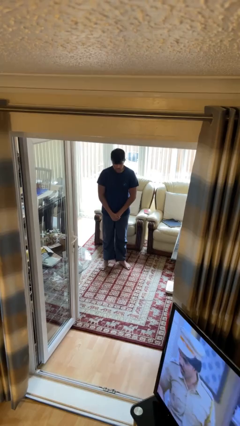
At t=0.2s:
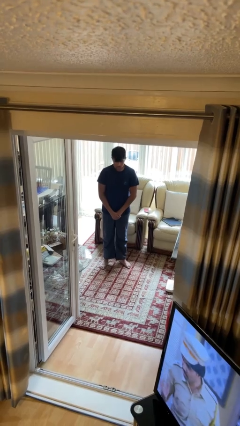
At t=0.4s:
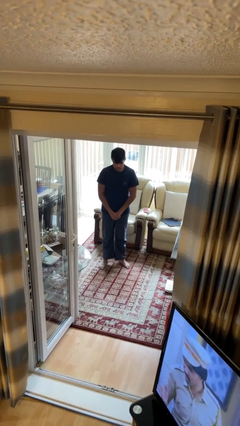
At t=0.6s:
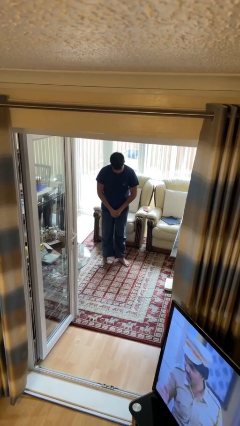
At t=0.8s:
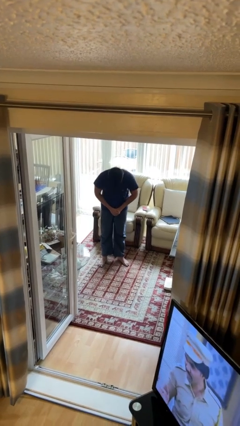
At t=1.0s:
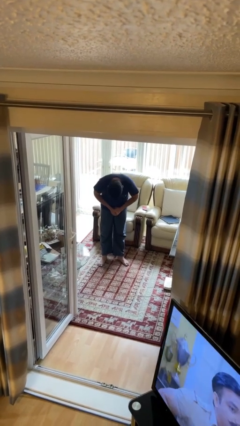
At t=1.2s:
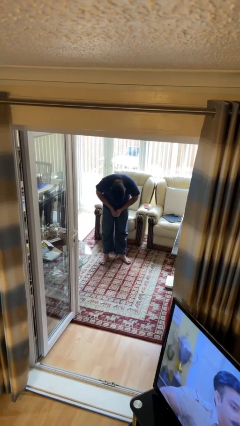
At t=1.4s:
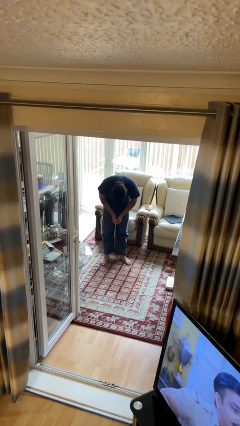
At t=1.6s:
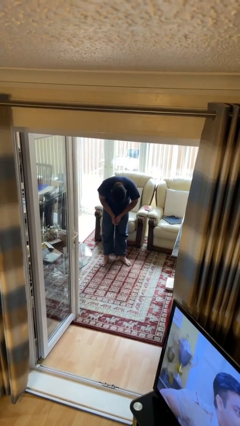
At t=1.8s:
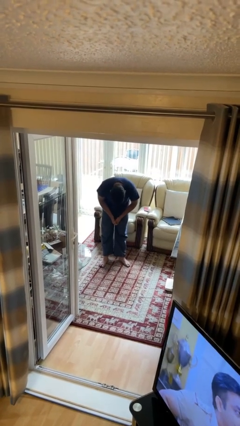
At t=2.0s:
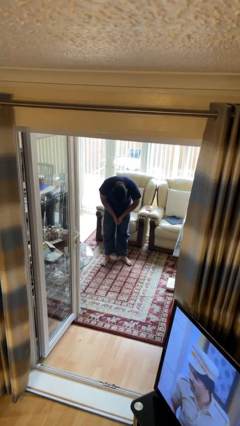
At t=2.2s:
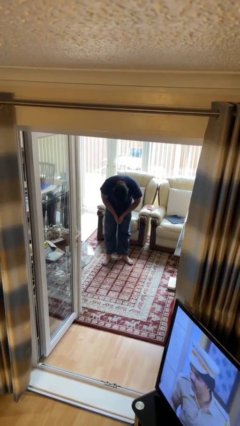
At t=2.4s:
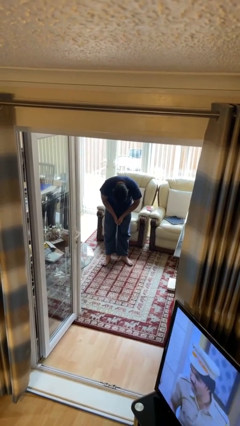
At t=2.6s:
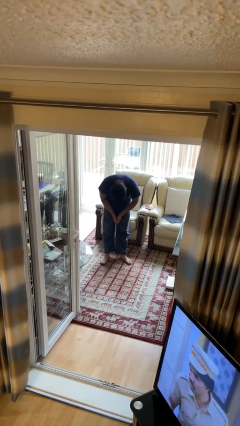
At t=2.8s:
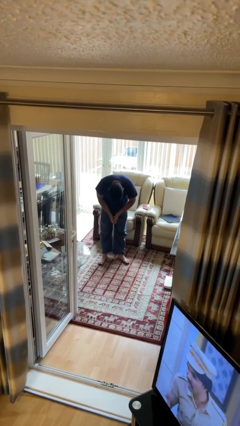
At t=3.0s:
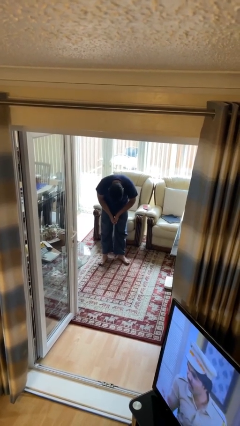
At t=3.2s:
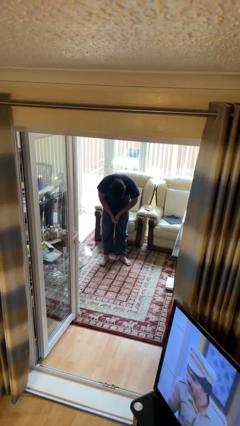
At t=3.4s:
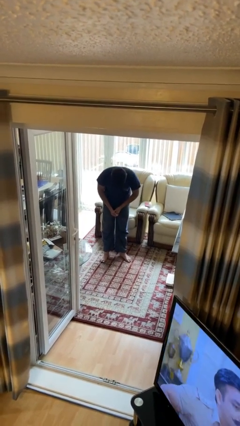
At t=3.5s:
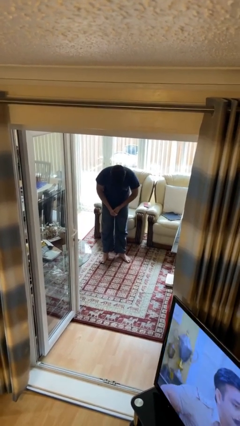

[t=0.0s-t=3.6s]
person bows

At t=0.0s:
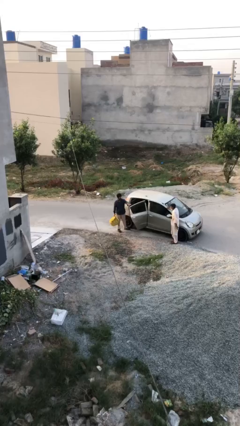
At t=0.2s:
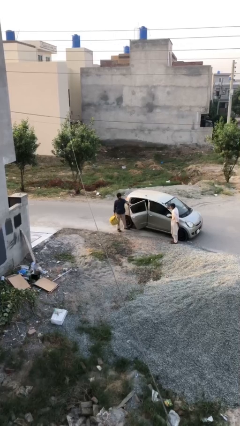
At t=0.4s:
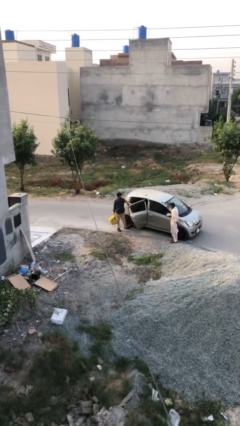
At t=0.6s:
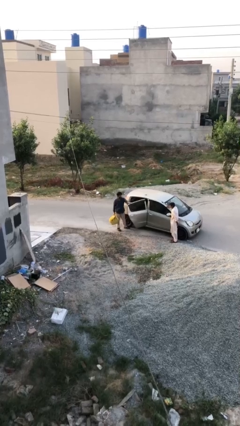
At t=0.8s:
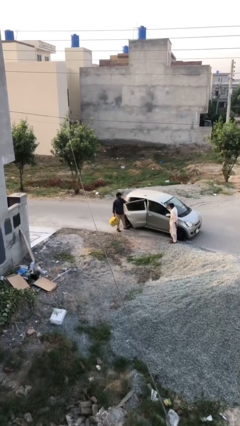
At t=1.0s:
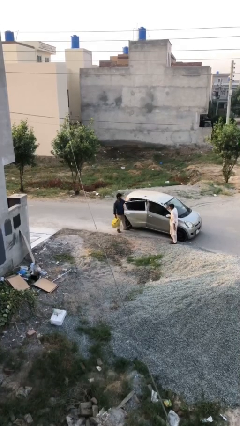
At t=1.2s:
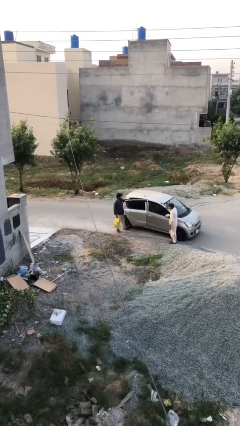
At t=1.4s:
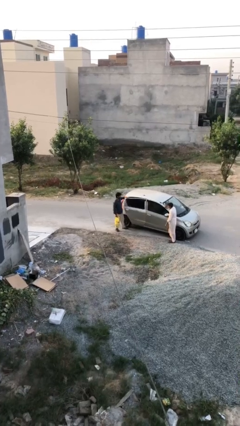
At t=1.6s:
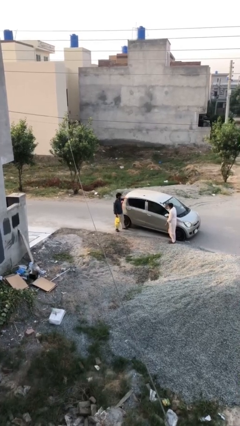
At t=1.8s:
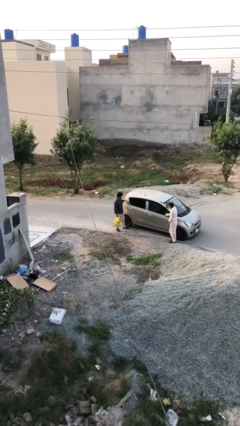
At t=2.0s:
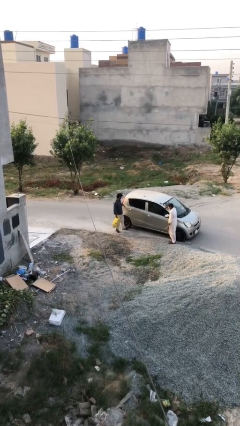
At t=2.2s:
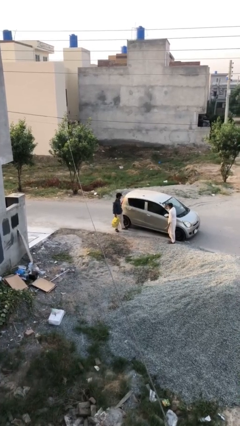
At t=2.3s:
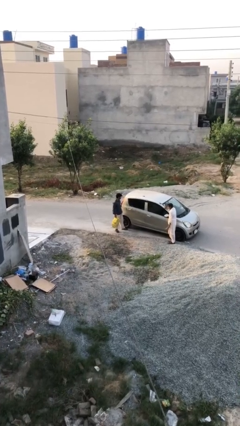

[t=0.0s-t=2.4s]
person closes car door

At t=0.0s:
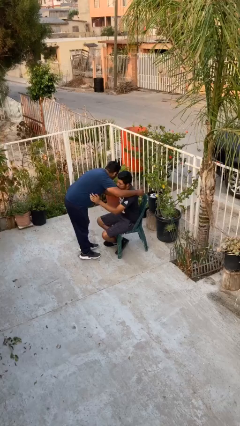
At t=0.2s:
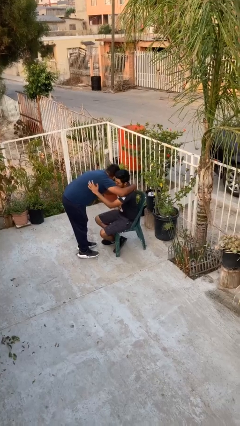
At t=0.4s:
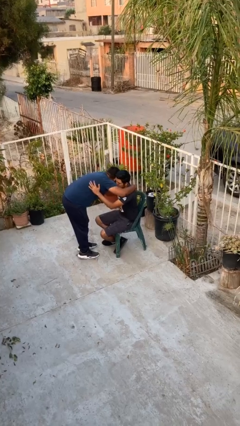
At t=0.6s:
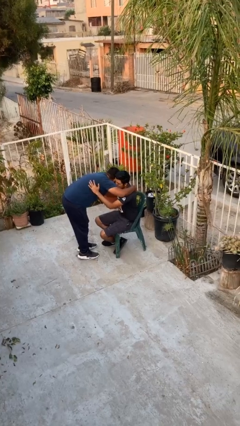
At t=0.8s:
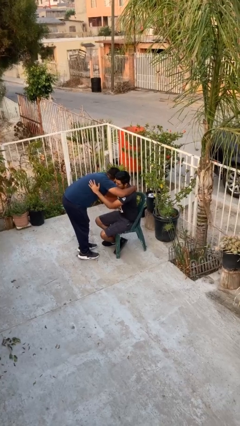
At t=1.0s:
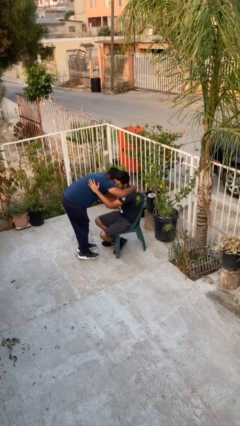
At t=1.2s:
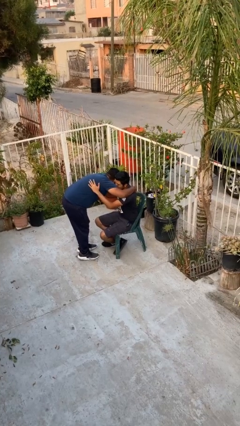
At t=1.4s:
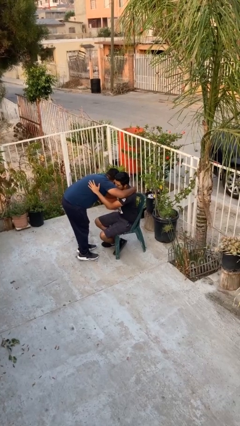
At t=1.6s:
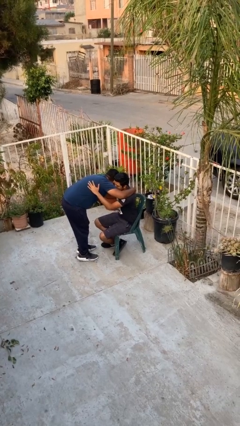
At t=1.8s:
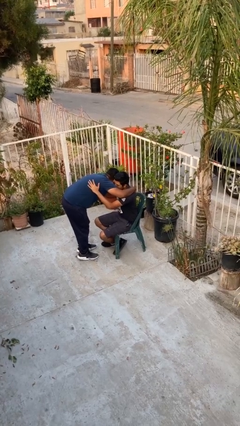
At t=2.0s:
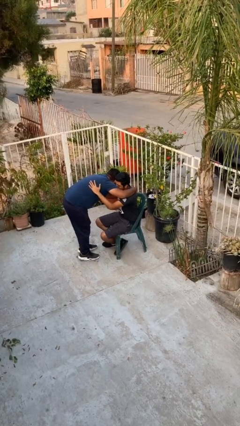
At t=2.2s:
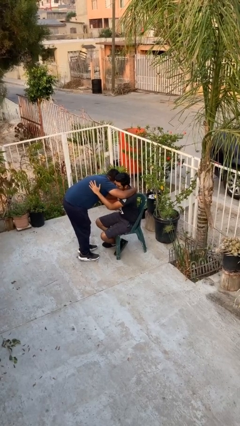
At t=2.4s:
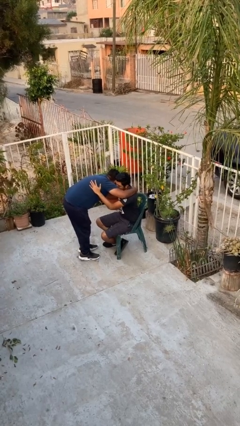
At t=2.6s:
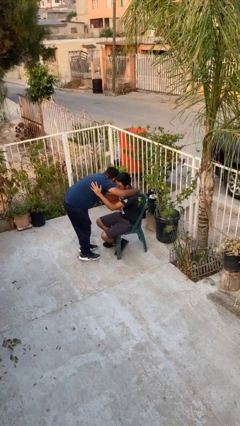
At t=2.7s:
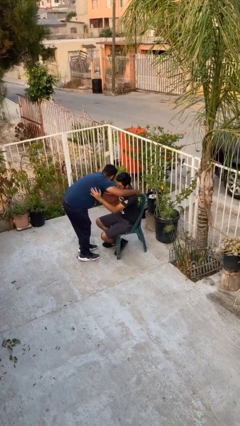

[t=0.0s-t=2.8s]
person embraces person

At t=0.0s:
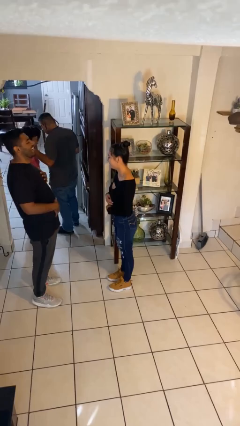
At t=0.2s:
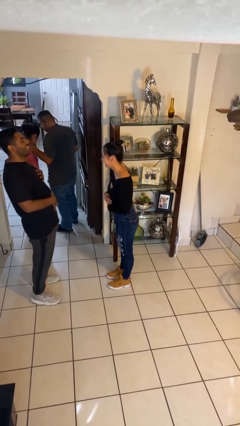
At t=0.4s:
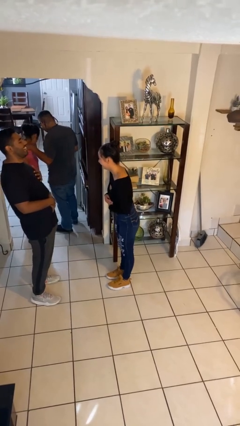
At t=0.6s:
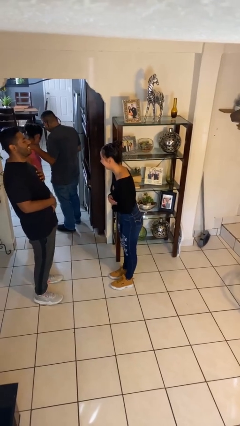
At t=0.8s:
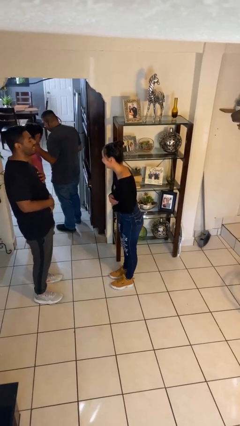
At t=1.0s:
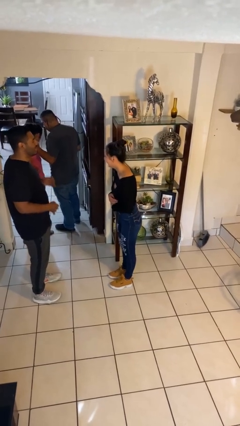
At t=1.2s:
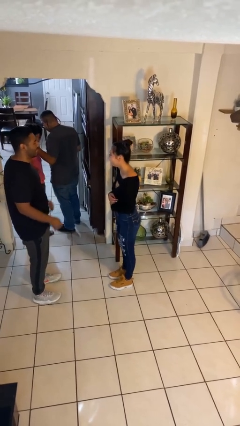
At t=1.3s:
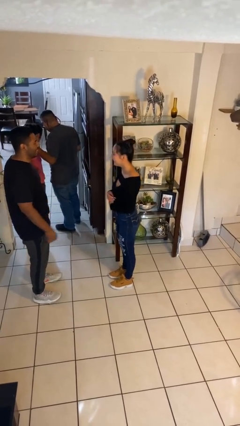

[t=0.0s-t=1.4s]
person laughs with person

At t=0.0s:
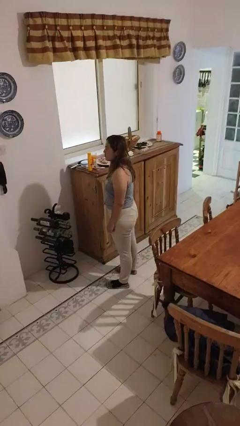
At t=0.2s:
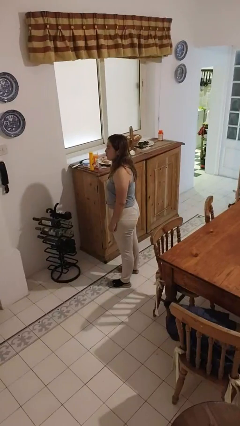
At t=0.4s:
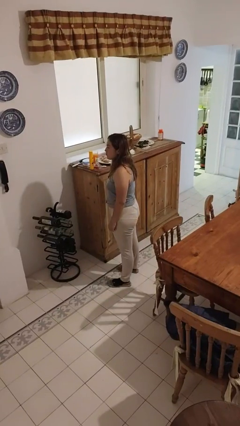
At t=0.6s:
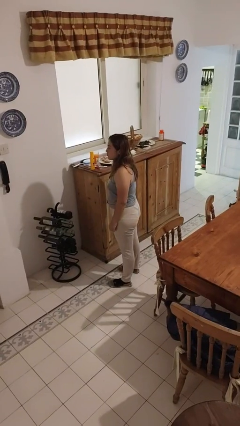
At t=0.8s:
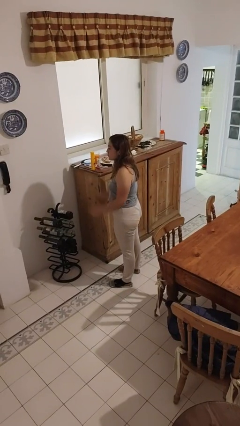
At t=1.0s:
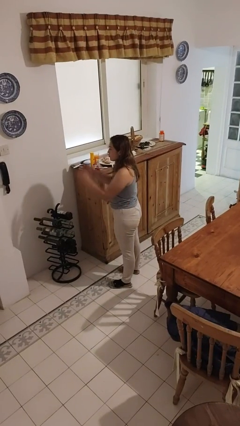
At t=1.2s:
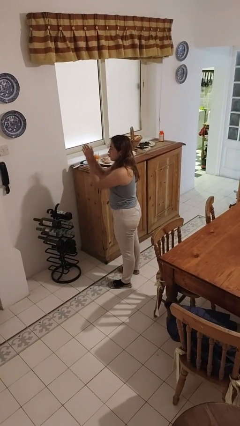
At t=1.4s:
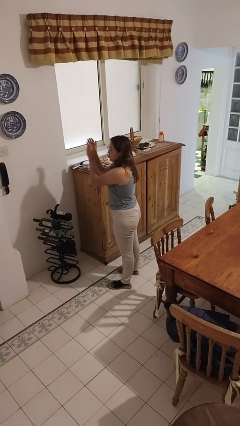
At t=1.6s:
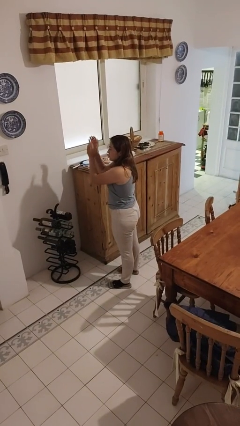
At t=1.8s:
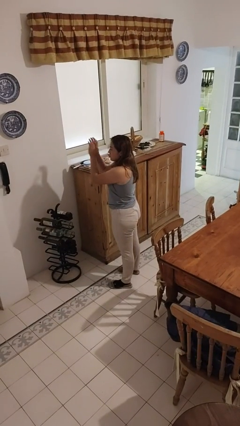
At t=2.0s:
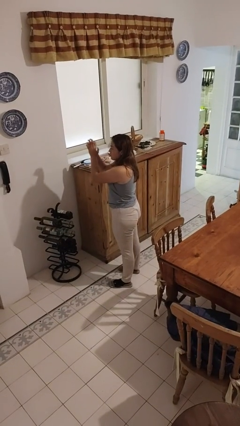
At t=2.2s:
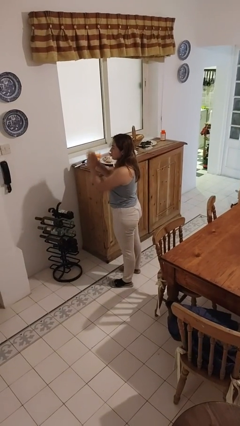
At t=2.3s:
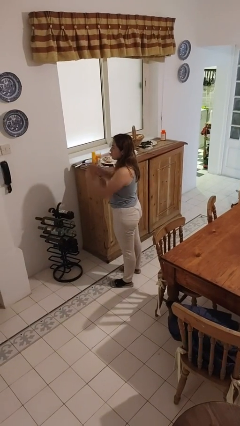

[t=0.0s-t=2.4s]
person claps hands

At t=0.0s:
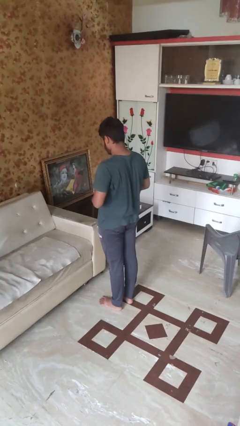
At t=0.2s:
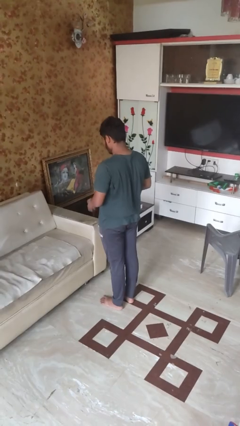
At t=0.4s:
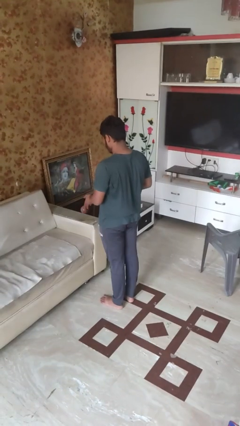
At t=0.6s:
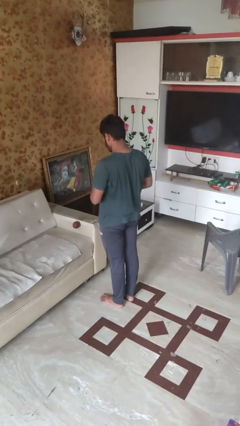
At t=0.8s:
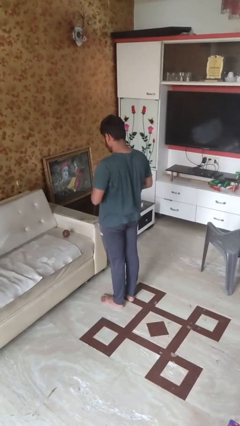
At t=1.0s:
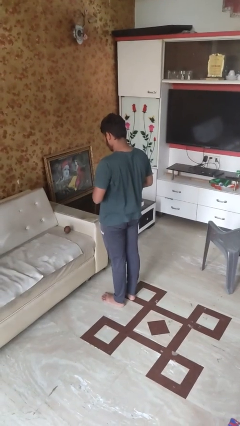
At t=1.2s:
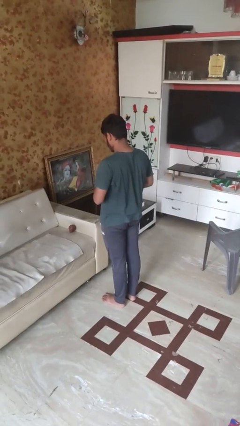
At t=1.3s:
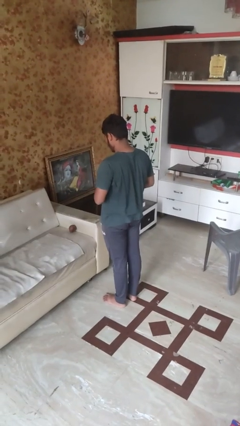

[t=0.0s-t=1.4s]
person throws object on bed

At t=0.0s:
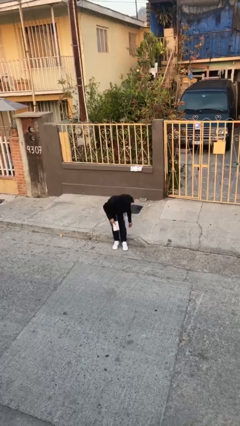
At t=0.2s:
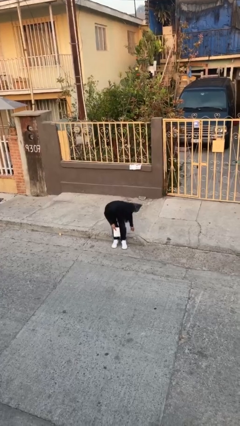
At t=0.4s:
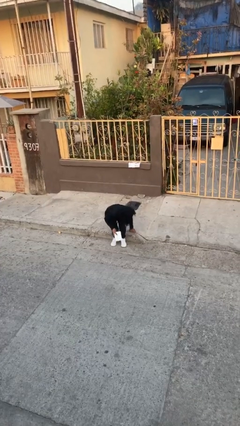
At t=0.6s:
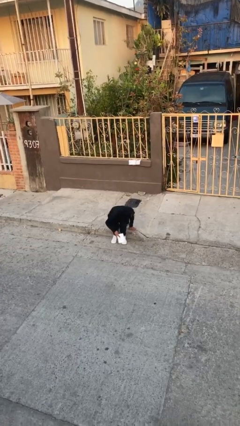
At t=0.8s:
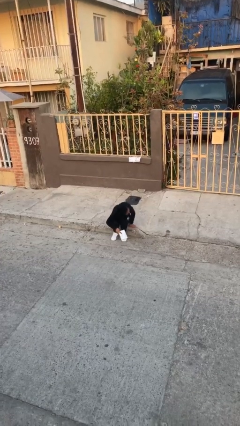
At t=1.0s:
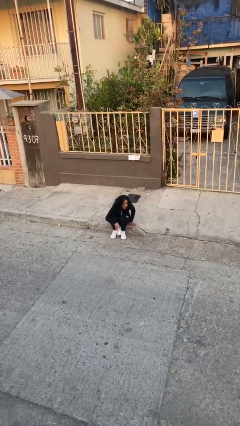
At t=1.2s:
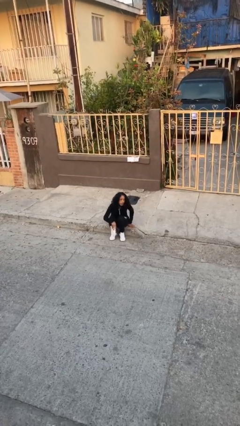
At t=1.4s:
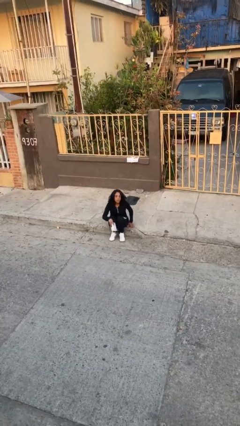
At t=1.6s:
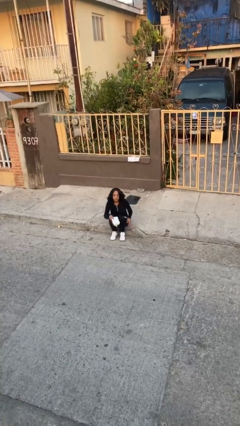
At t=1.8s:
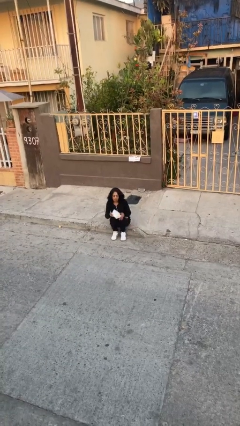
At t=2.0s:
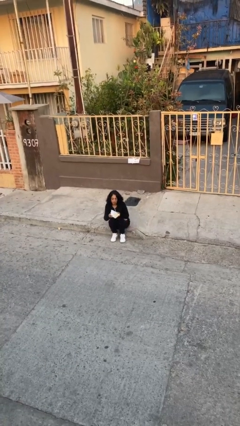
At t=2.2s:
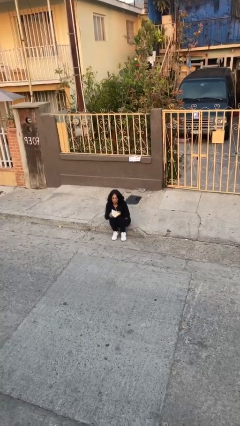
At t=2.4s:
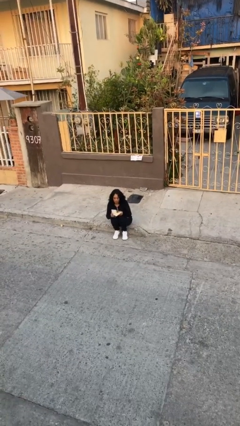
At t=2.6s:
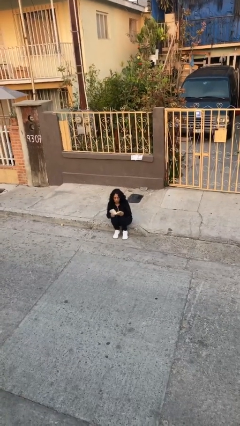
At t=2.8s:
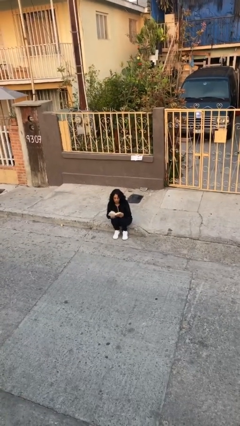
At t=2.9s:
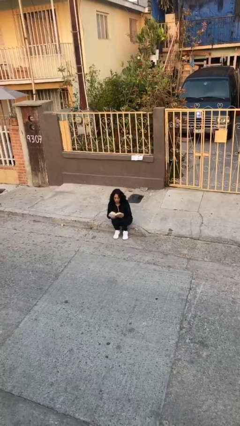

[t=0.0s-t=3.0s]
person sits down

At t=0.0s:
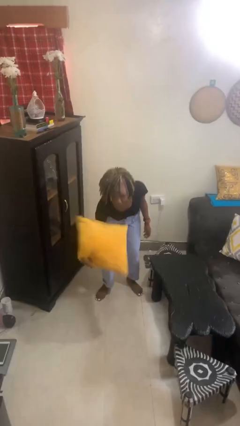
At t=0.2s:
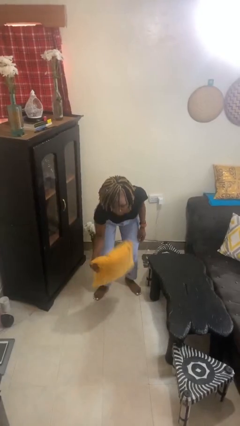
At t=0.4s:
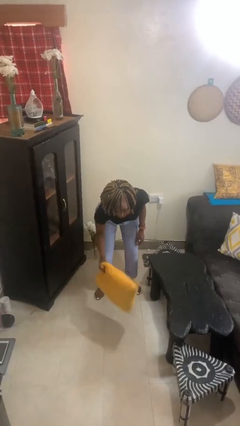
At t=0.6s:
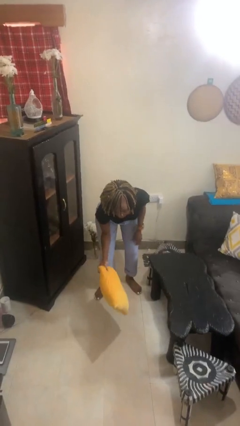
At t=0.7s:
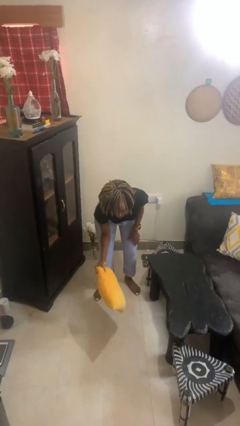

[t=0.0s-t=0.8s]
person drops object
